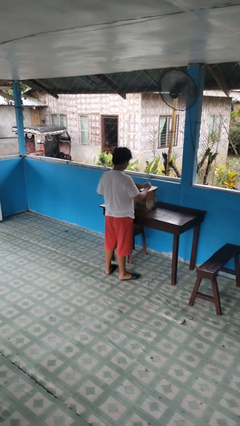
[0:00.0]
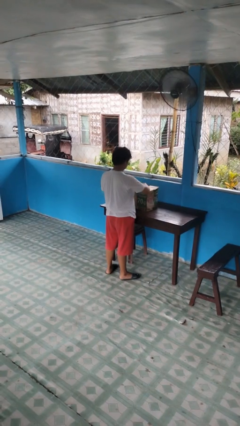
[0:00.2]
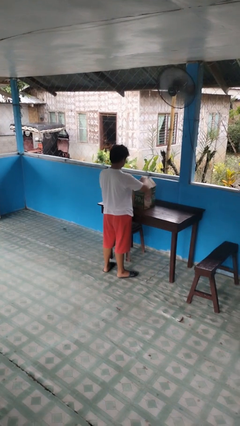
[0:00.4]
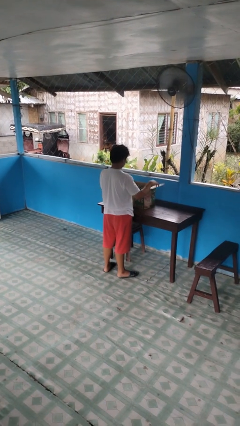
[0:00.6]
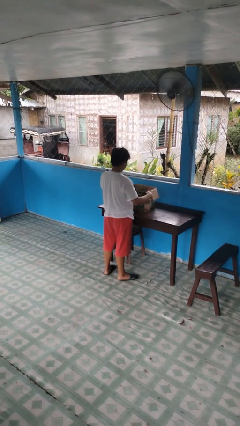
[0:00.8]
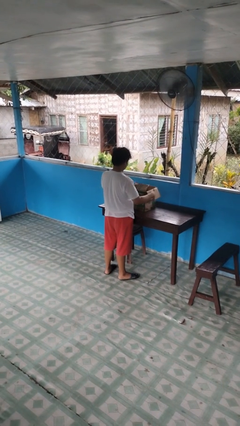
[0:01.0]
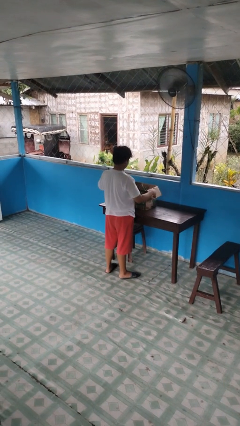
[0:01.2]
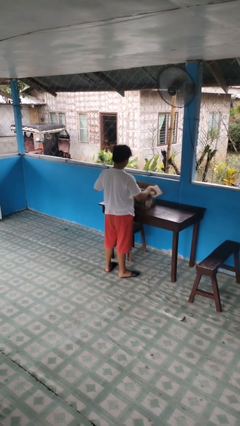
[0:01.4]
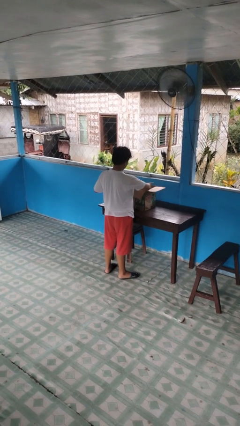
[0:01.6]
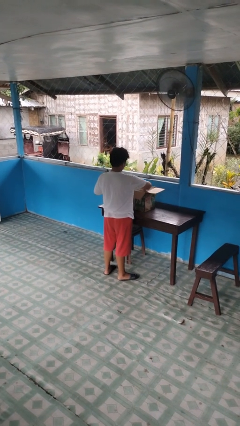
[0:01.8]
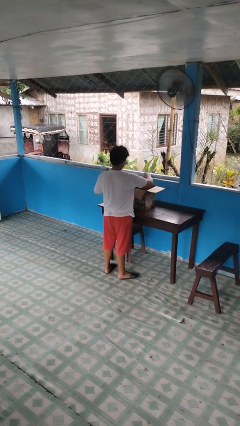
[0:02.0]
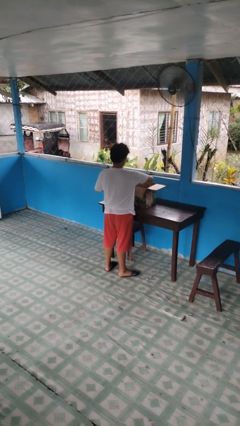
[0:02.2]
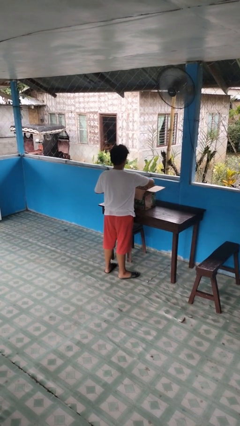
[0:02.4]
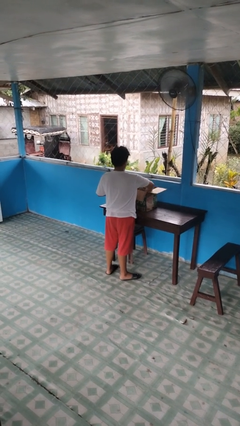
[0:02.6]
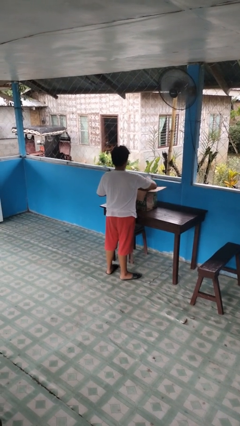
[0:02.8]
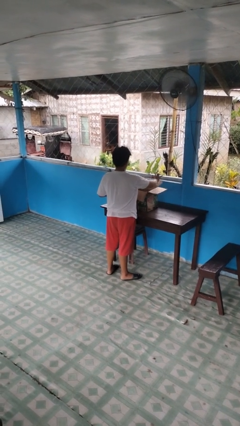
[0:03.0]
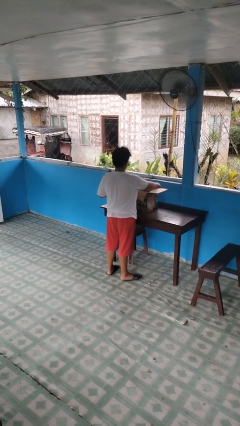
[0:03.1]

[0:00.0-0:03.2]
person opens box

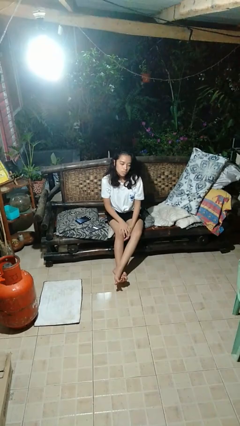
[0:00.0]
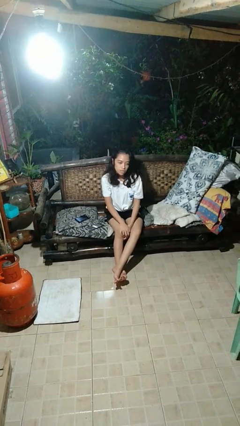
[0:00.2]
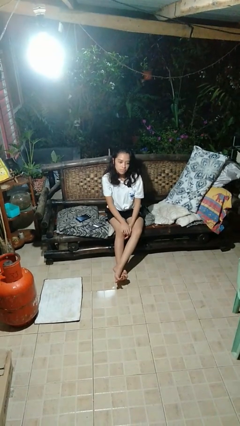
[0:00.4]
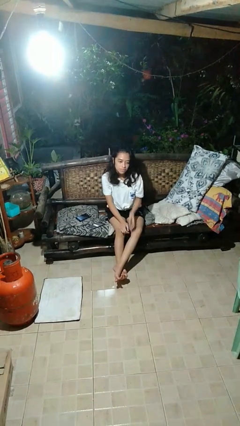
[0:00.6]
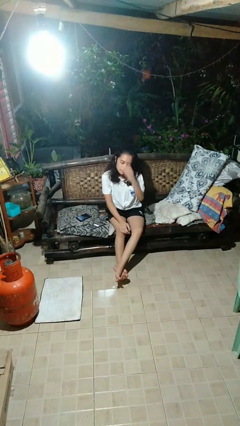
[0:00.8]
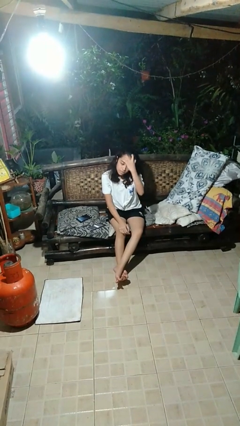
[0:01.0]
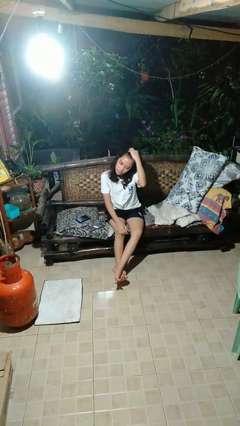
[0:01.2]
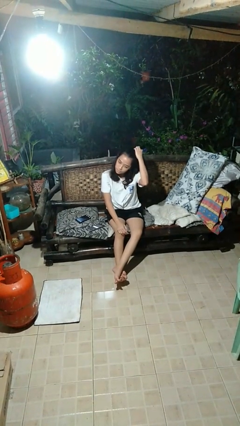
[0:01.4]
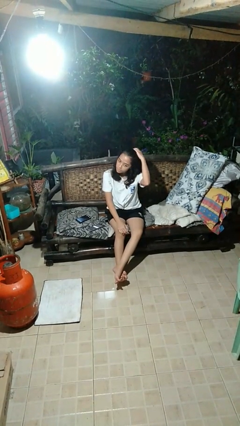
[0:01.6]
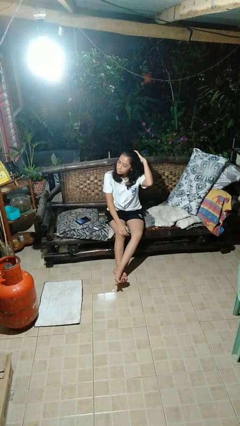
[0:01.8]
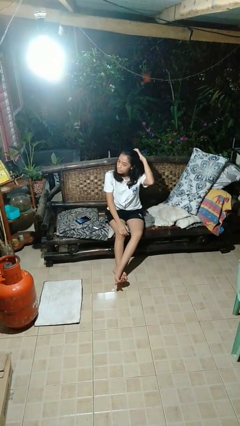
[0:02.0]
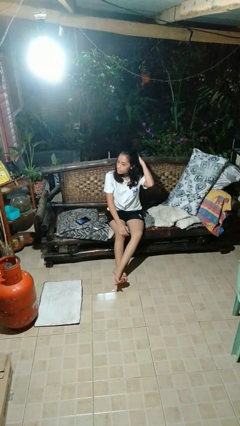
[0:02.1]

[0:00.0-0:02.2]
person strokes hair

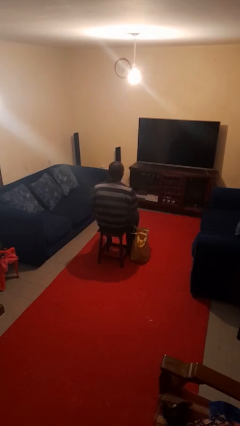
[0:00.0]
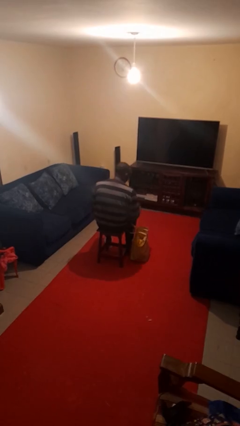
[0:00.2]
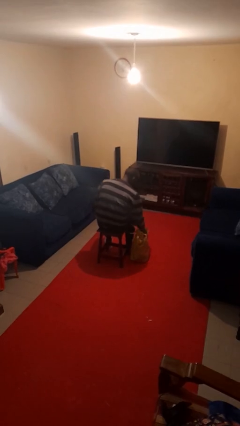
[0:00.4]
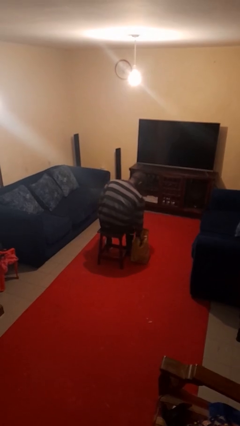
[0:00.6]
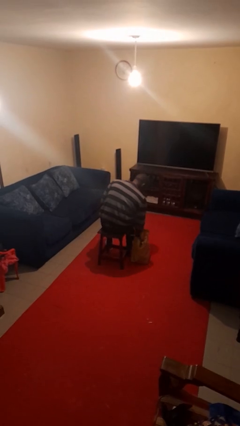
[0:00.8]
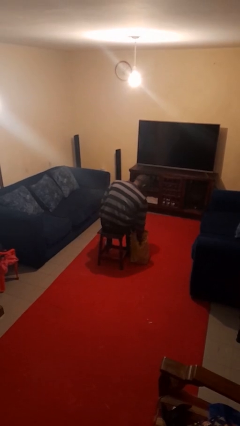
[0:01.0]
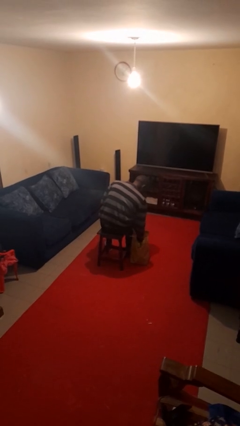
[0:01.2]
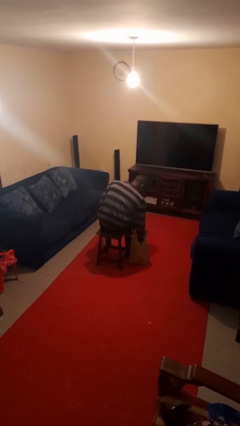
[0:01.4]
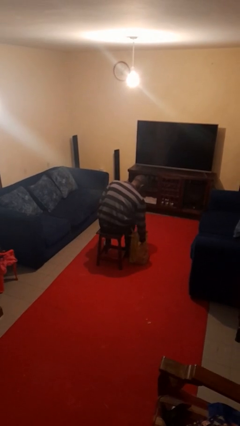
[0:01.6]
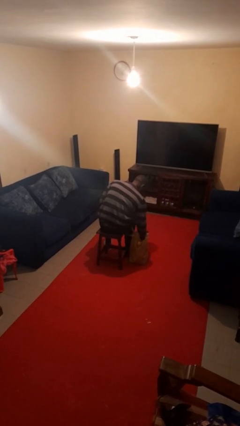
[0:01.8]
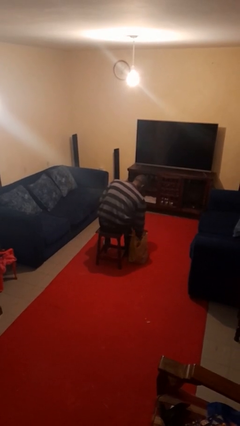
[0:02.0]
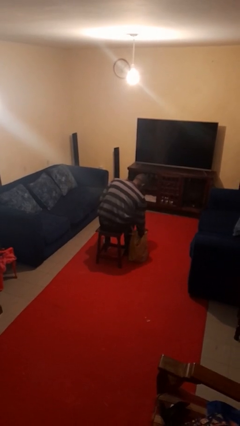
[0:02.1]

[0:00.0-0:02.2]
person searches in bag

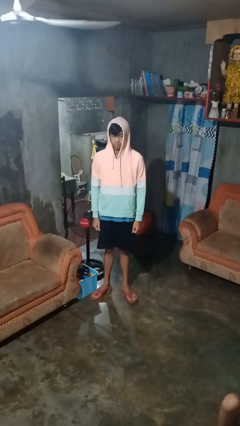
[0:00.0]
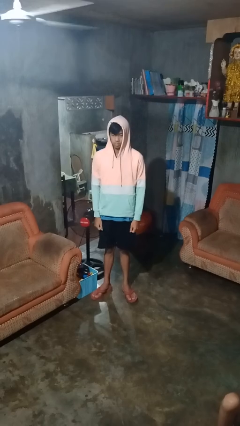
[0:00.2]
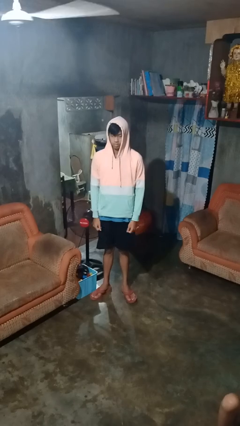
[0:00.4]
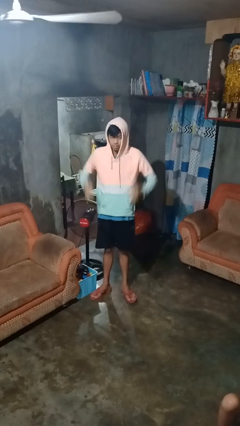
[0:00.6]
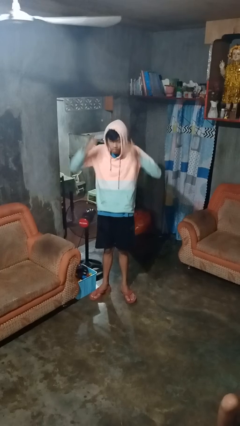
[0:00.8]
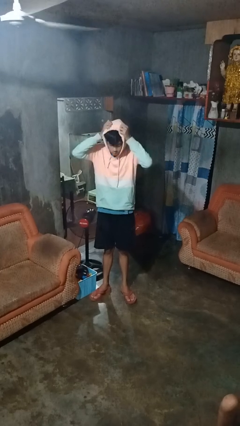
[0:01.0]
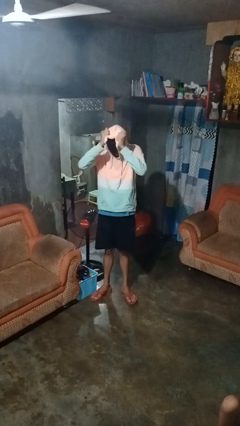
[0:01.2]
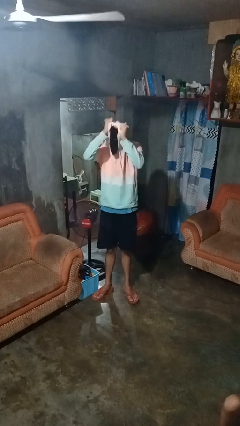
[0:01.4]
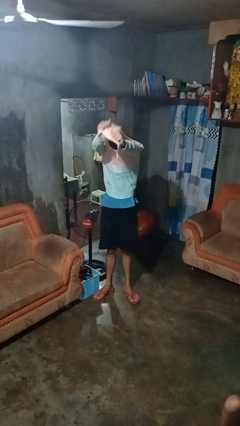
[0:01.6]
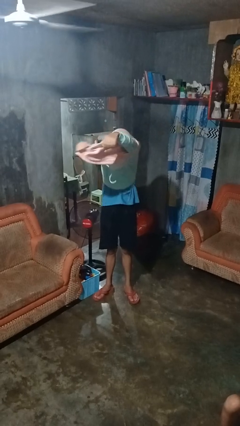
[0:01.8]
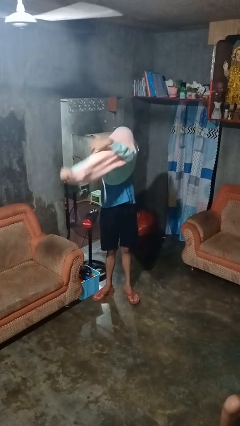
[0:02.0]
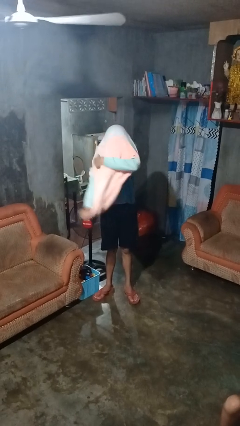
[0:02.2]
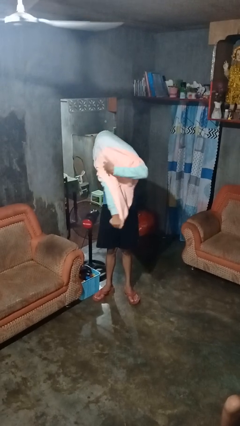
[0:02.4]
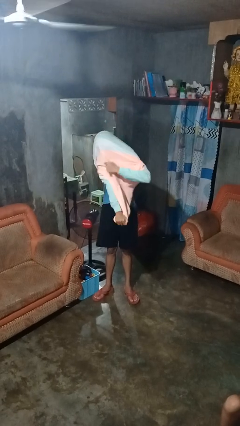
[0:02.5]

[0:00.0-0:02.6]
person takes off hoodie

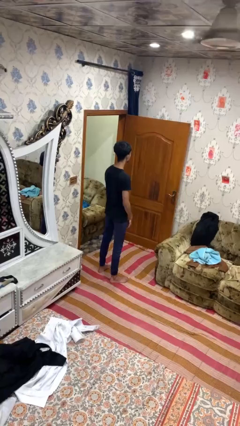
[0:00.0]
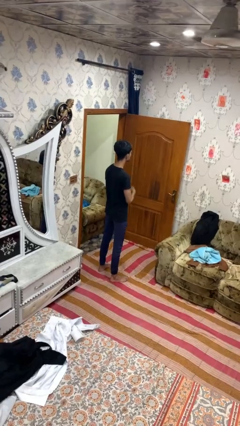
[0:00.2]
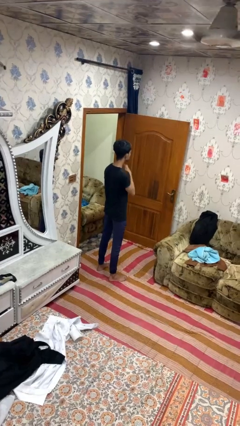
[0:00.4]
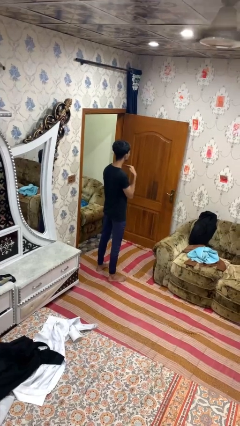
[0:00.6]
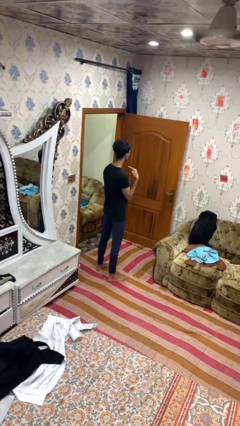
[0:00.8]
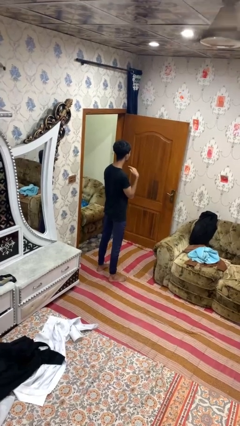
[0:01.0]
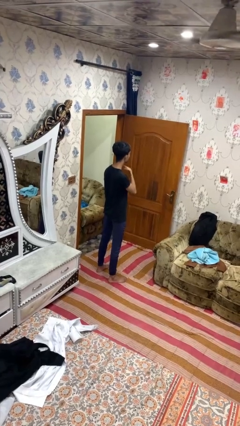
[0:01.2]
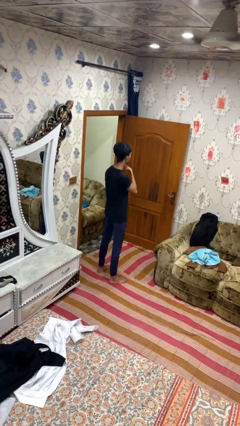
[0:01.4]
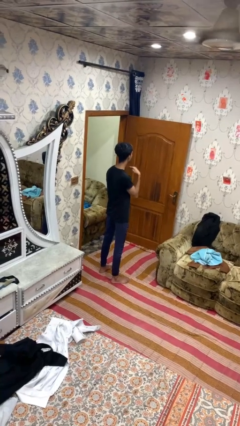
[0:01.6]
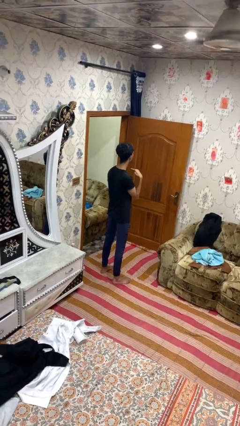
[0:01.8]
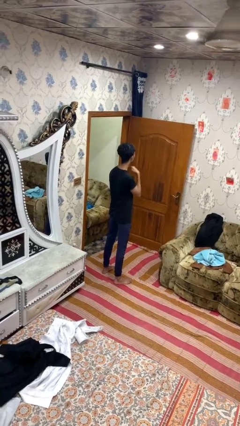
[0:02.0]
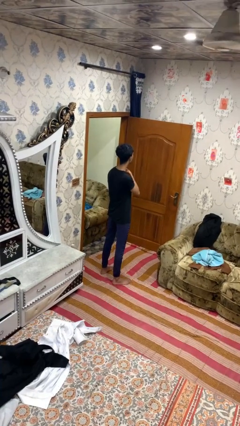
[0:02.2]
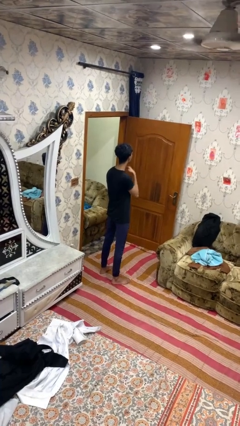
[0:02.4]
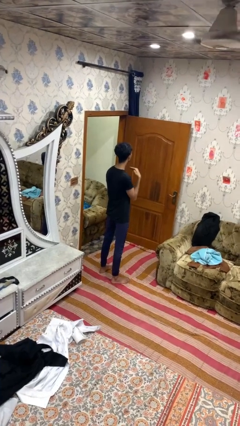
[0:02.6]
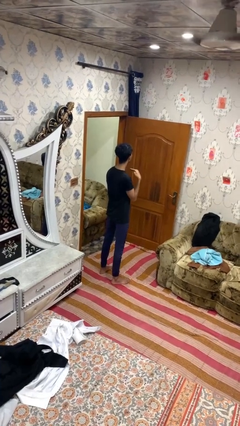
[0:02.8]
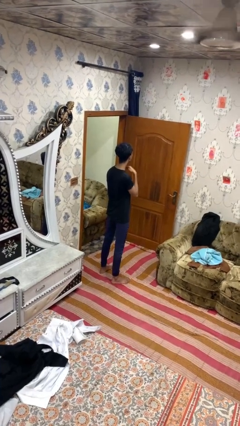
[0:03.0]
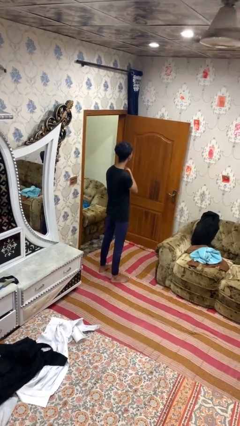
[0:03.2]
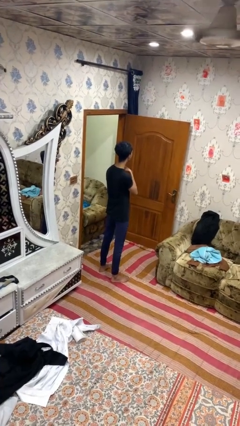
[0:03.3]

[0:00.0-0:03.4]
person gestures cut

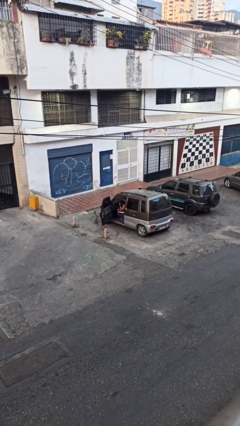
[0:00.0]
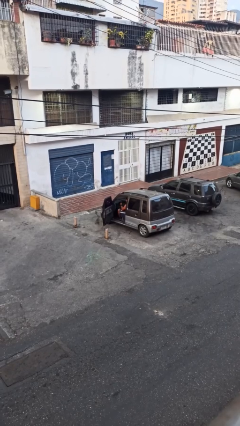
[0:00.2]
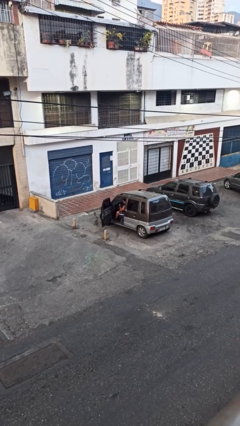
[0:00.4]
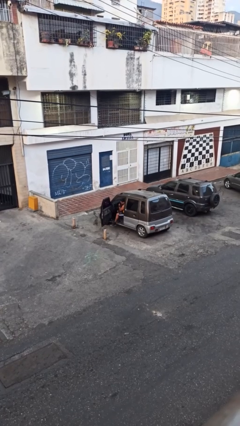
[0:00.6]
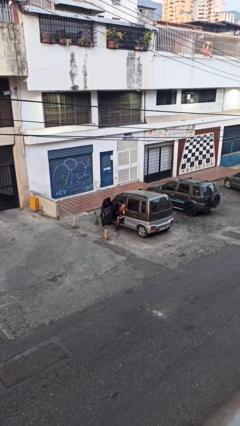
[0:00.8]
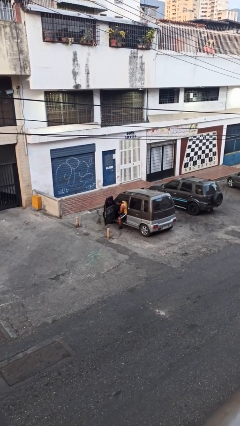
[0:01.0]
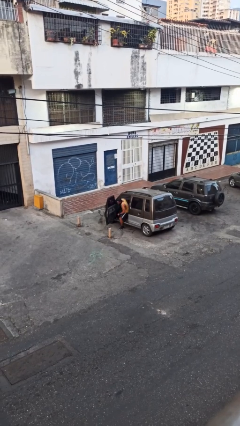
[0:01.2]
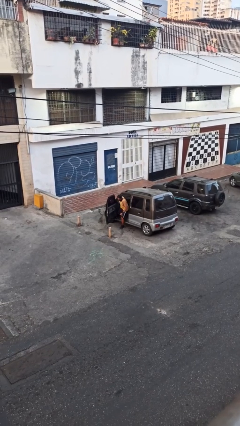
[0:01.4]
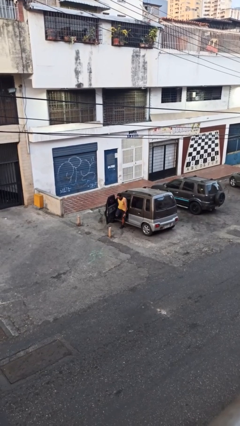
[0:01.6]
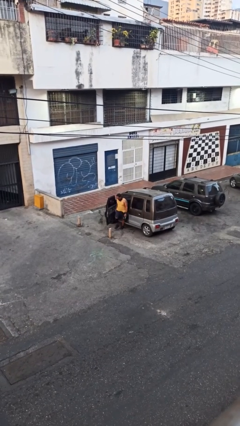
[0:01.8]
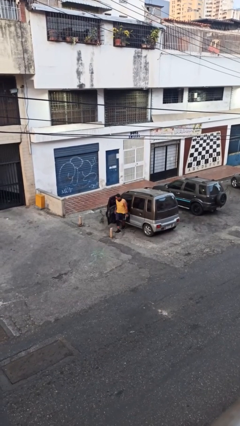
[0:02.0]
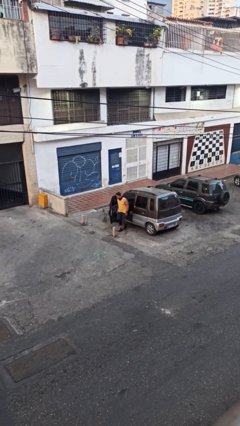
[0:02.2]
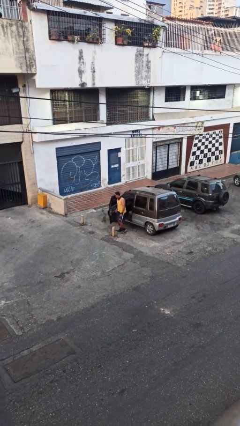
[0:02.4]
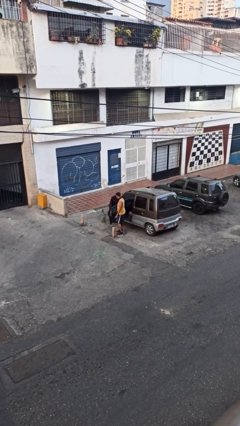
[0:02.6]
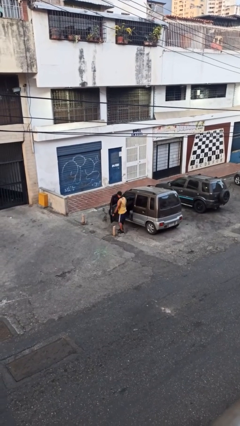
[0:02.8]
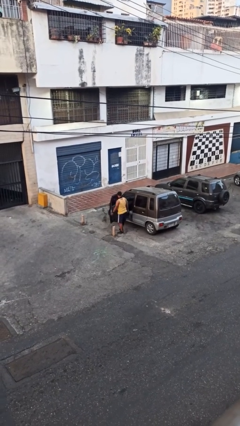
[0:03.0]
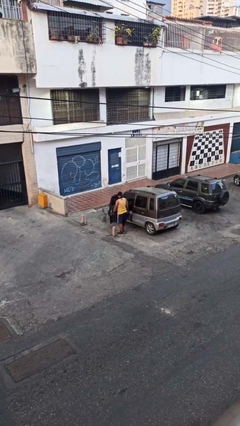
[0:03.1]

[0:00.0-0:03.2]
person exits car

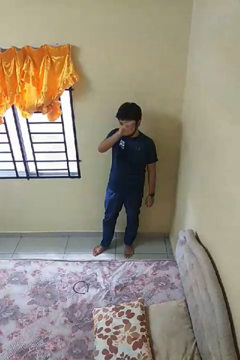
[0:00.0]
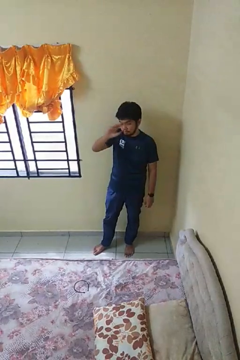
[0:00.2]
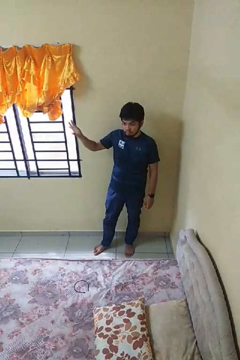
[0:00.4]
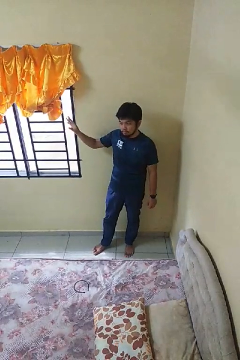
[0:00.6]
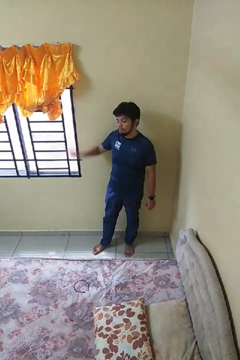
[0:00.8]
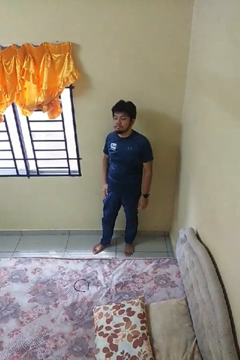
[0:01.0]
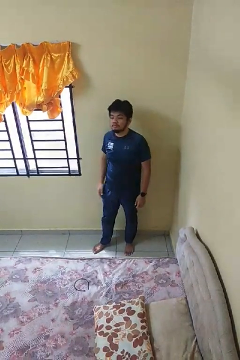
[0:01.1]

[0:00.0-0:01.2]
person gestures swipe right
